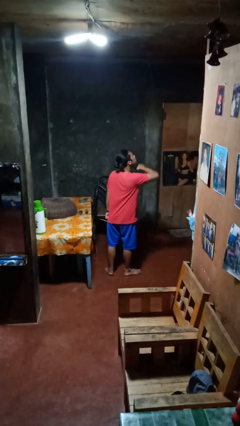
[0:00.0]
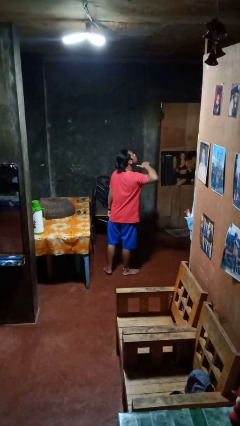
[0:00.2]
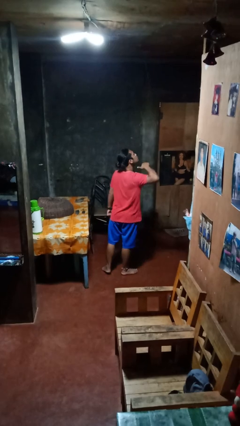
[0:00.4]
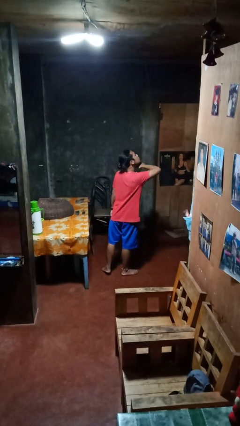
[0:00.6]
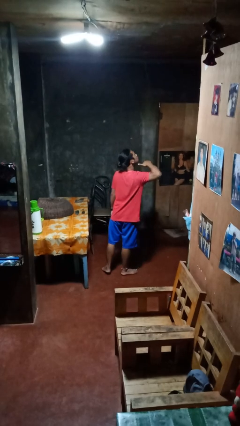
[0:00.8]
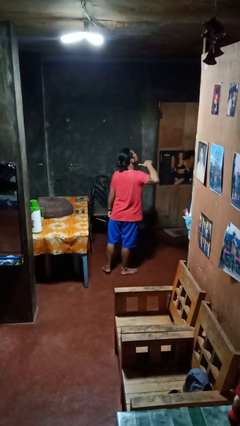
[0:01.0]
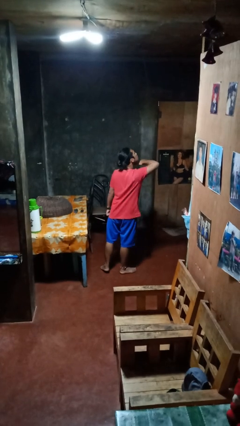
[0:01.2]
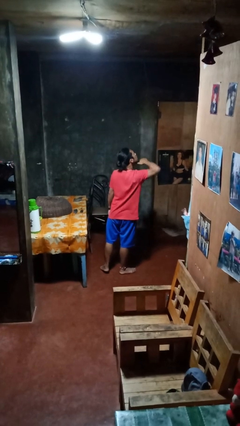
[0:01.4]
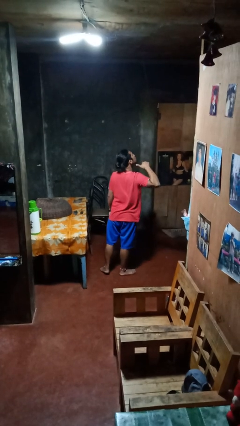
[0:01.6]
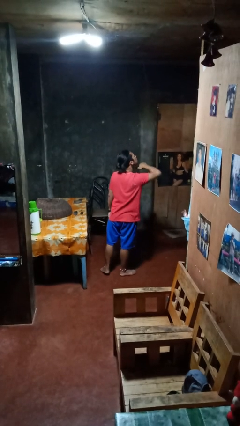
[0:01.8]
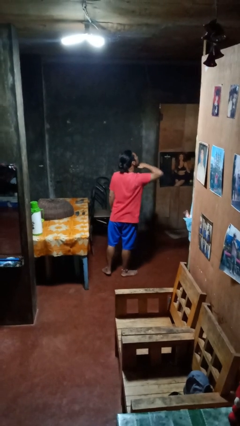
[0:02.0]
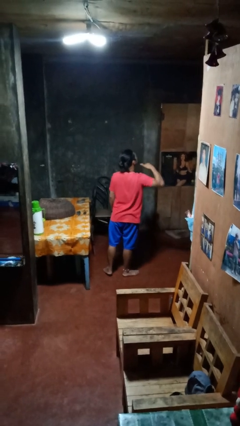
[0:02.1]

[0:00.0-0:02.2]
person gestures cut

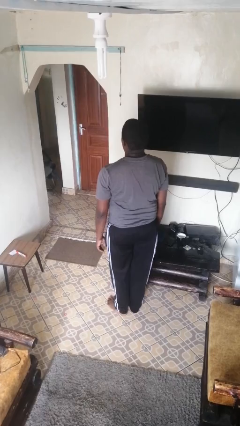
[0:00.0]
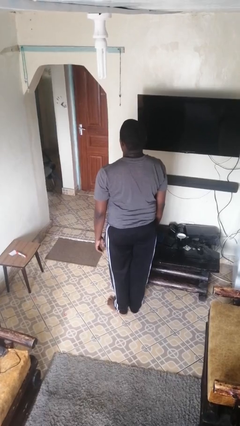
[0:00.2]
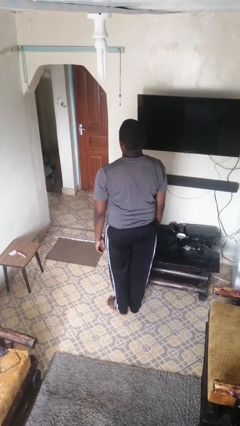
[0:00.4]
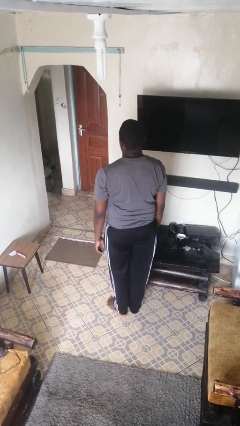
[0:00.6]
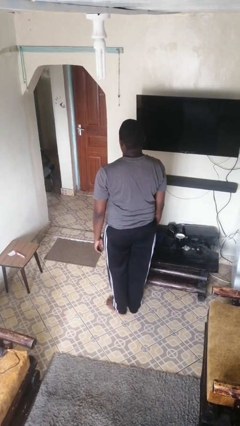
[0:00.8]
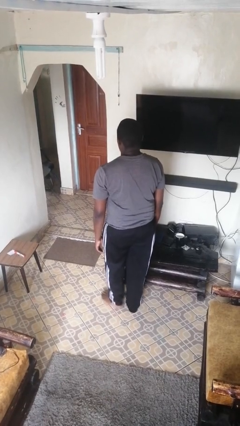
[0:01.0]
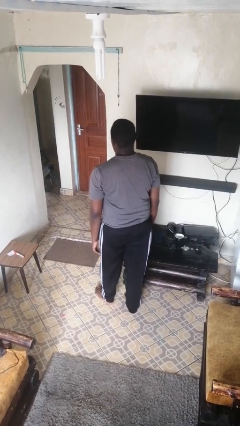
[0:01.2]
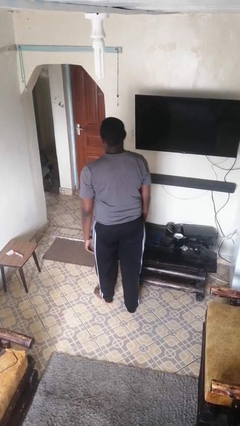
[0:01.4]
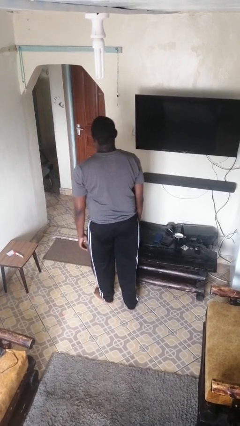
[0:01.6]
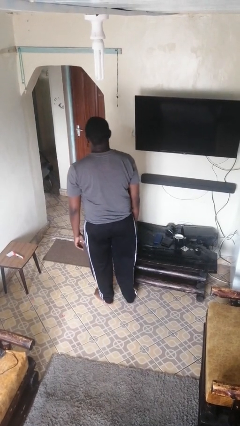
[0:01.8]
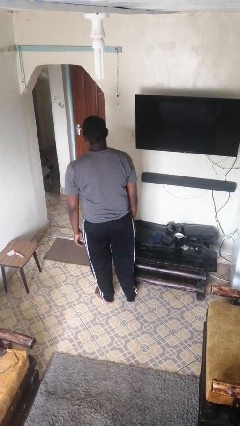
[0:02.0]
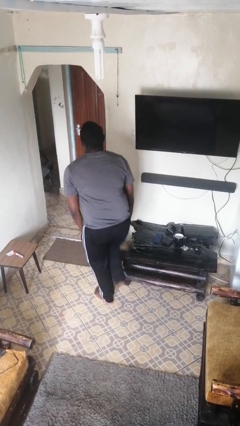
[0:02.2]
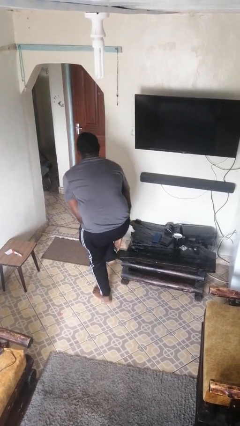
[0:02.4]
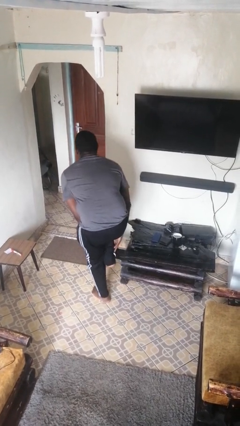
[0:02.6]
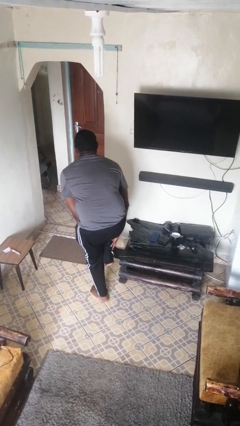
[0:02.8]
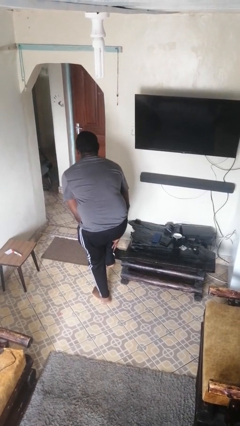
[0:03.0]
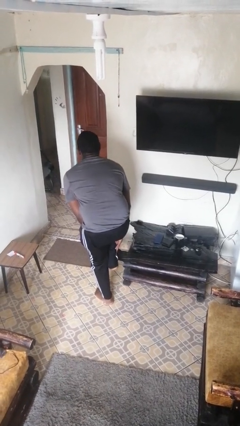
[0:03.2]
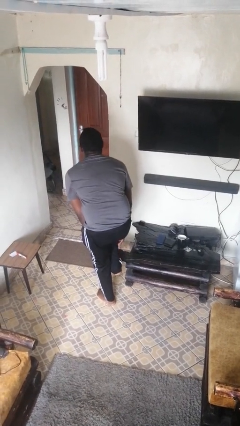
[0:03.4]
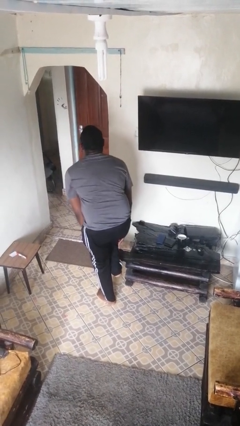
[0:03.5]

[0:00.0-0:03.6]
person bumps into table

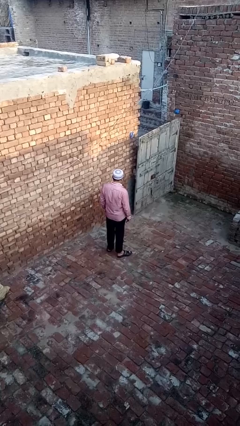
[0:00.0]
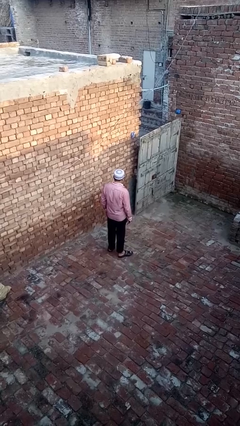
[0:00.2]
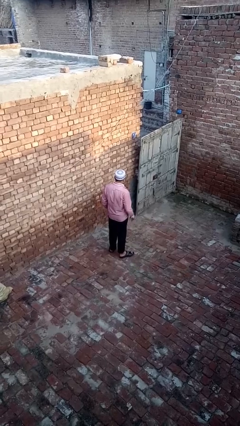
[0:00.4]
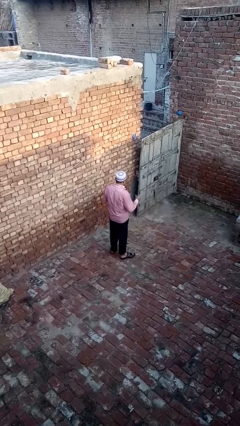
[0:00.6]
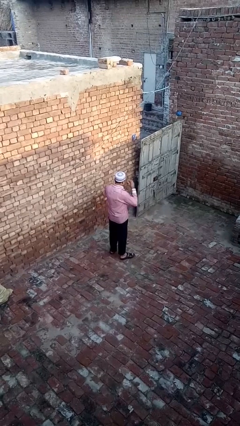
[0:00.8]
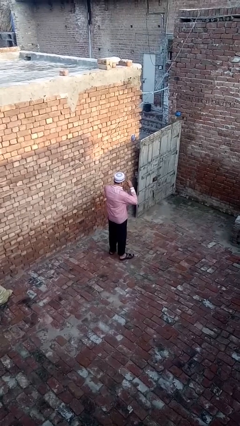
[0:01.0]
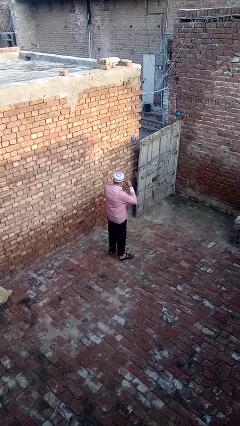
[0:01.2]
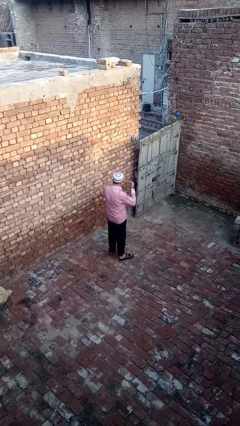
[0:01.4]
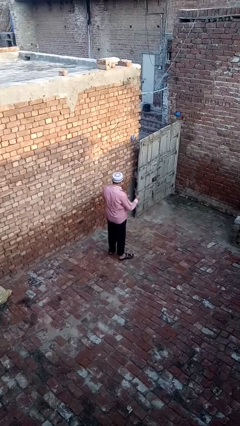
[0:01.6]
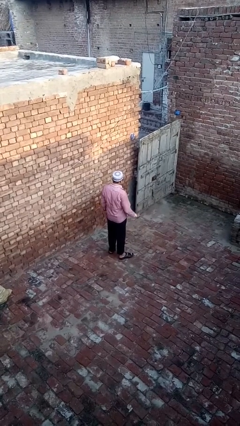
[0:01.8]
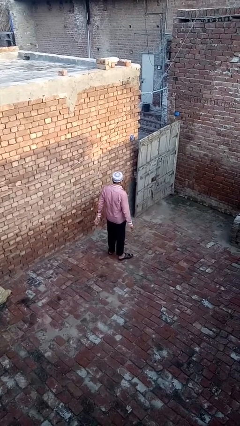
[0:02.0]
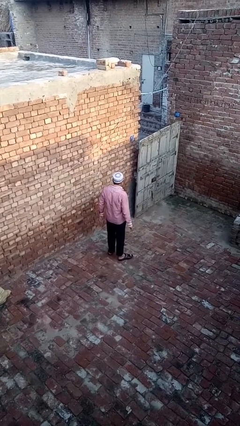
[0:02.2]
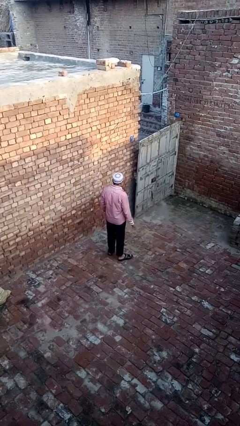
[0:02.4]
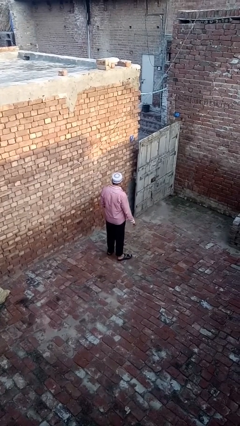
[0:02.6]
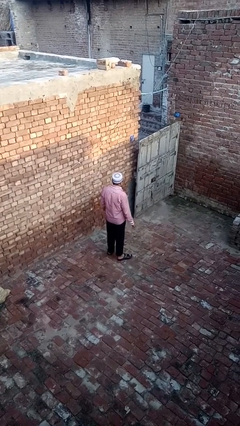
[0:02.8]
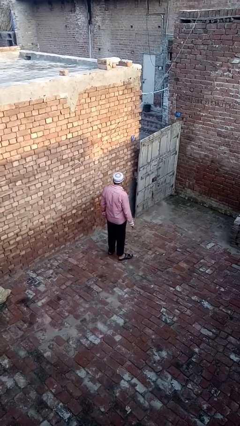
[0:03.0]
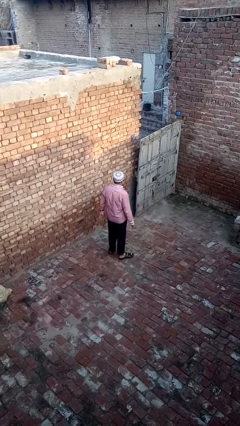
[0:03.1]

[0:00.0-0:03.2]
person takes off glasses

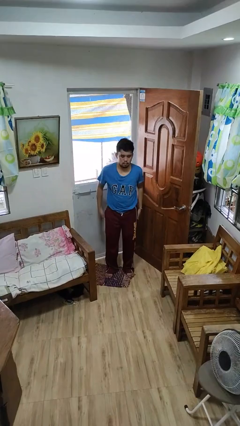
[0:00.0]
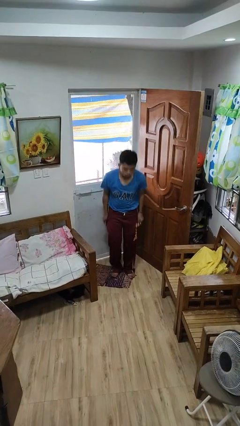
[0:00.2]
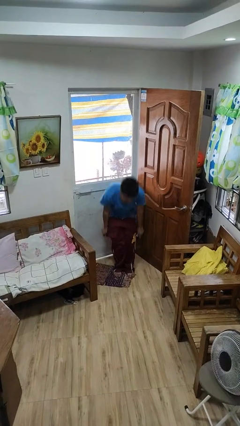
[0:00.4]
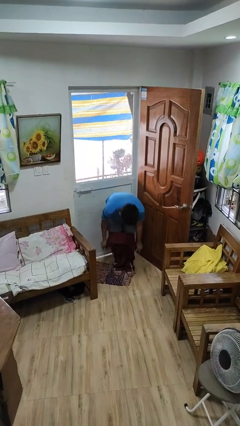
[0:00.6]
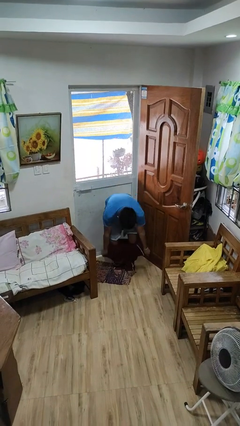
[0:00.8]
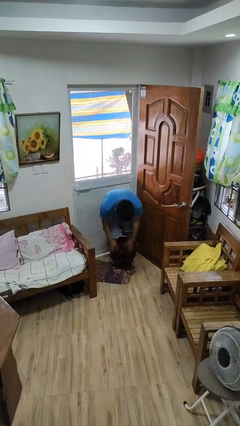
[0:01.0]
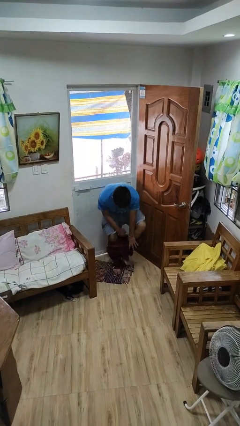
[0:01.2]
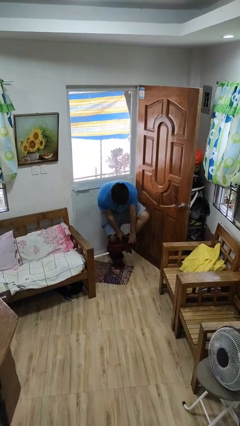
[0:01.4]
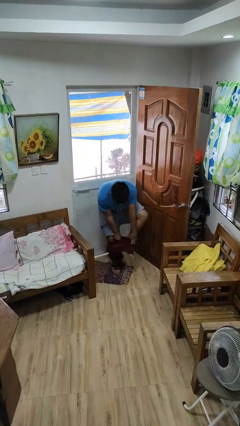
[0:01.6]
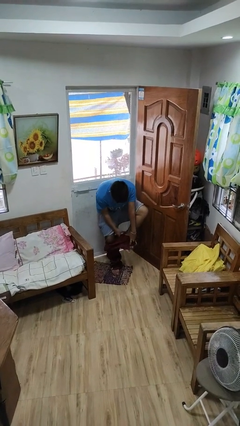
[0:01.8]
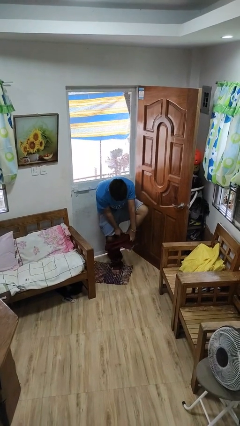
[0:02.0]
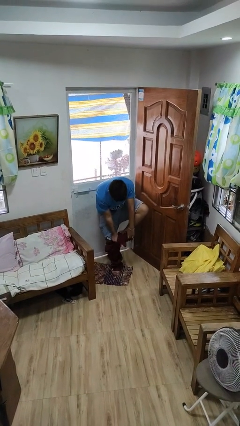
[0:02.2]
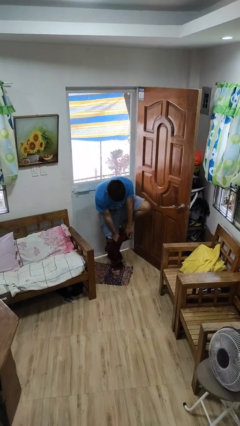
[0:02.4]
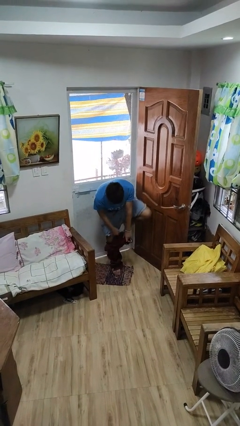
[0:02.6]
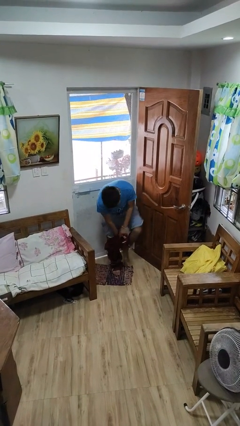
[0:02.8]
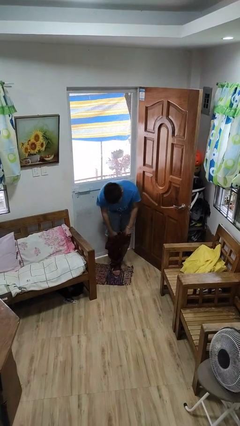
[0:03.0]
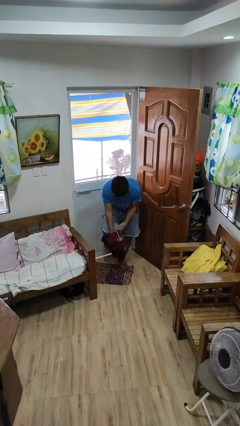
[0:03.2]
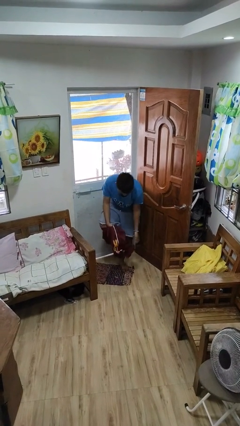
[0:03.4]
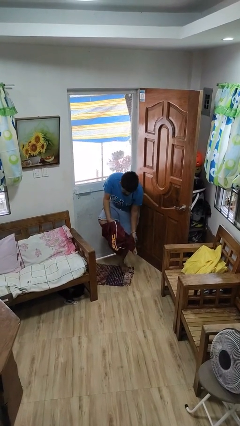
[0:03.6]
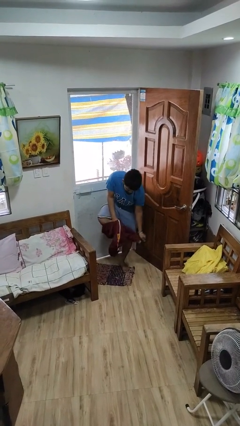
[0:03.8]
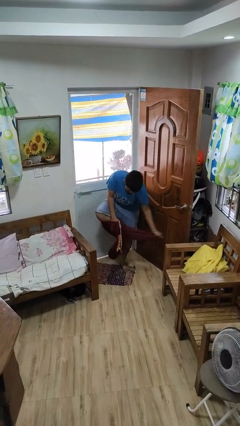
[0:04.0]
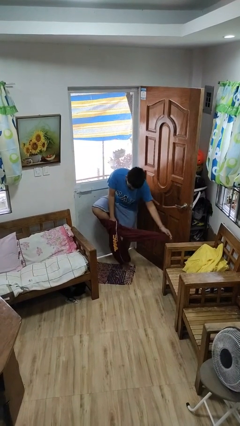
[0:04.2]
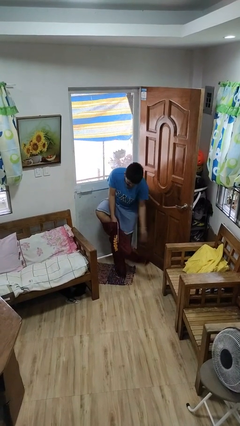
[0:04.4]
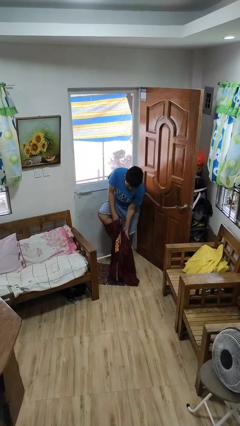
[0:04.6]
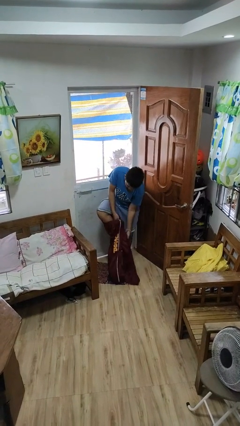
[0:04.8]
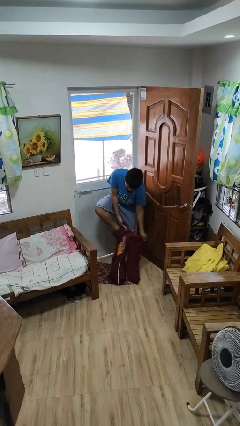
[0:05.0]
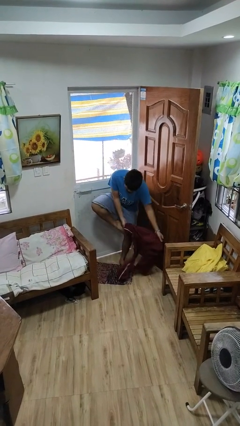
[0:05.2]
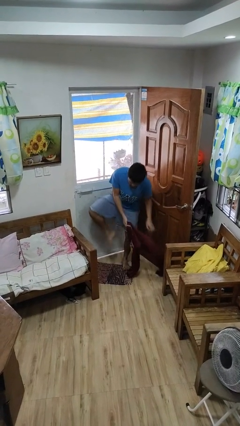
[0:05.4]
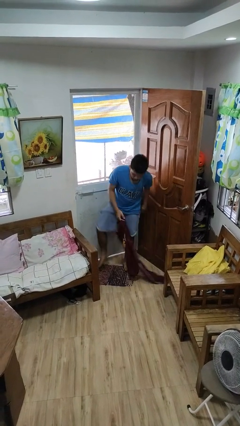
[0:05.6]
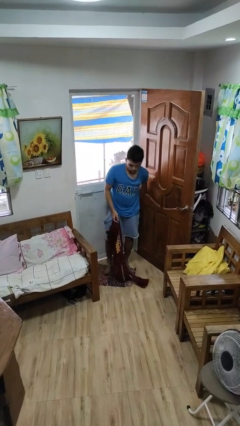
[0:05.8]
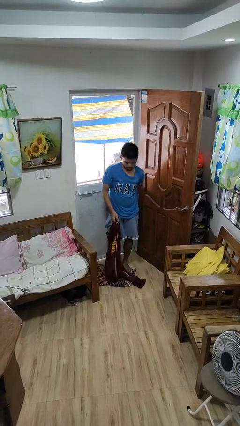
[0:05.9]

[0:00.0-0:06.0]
person takes off pants

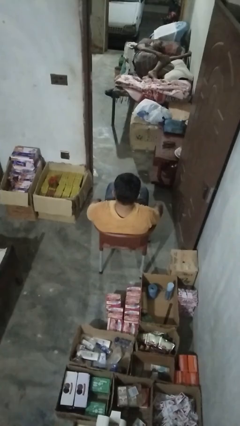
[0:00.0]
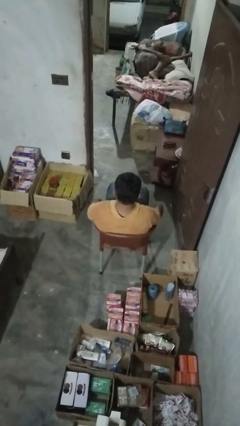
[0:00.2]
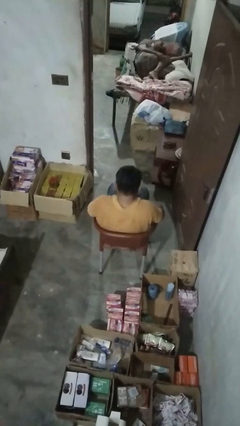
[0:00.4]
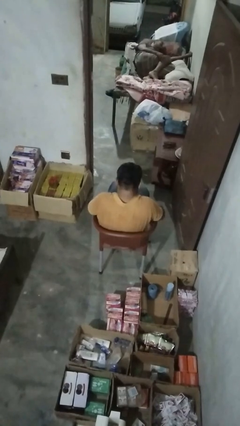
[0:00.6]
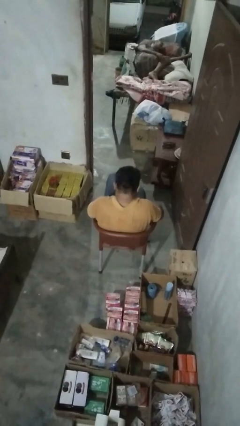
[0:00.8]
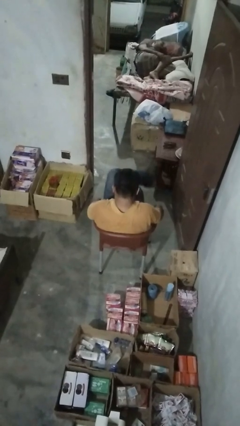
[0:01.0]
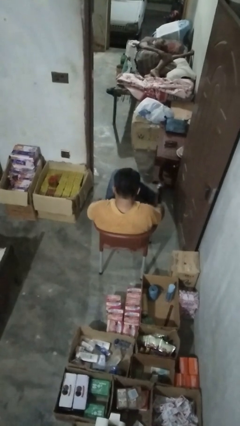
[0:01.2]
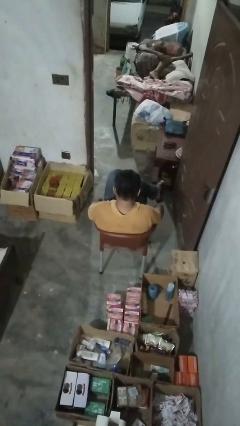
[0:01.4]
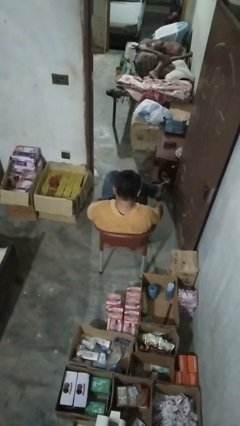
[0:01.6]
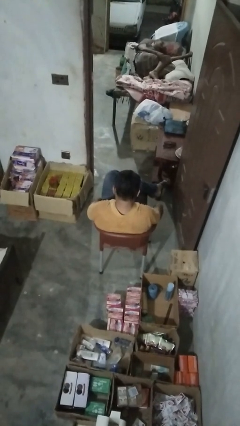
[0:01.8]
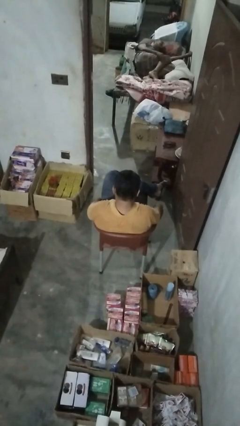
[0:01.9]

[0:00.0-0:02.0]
person crosses legs

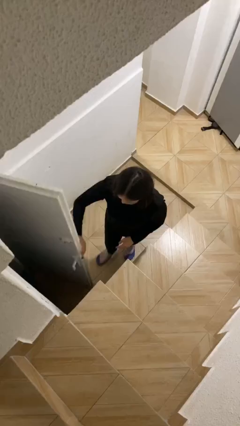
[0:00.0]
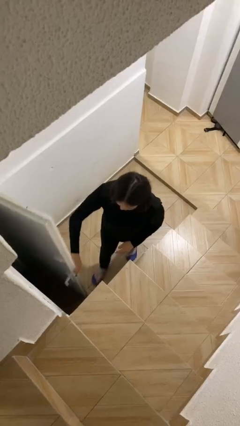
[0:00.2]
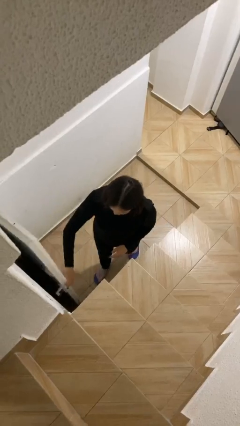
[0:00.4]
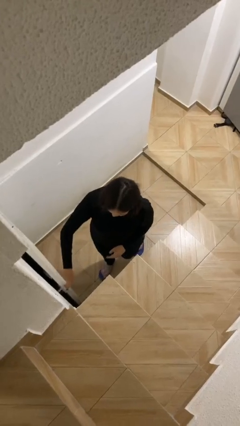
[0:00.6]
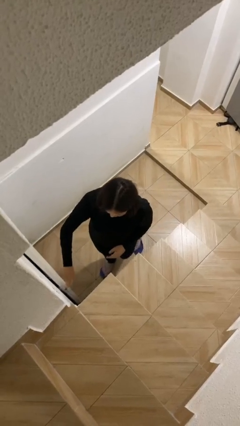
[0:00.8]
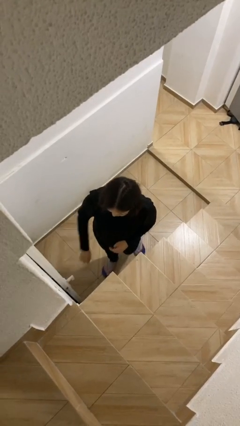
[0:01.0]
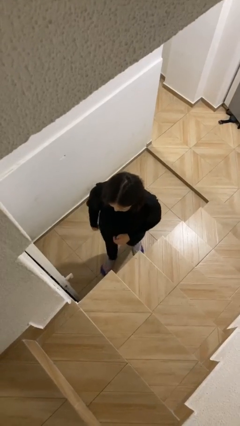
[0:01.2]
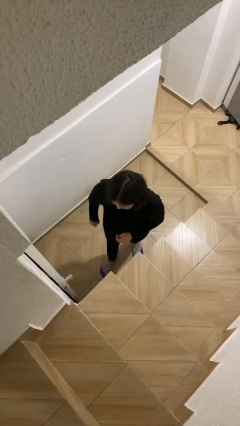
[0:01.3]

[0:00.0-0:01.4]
person closes facility door
